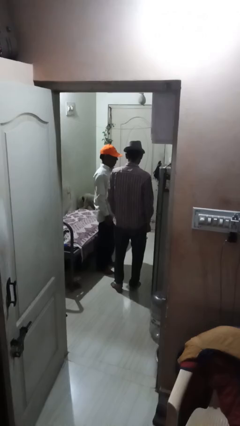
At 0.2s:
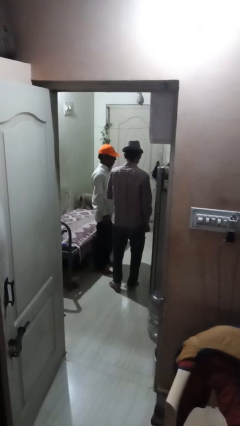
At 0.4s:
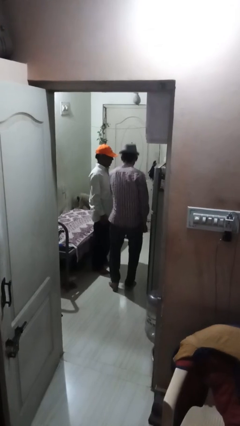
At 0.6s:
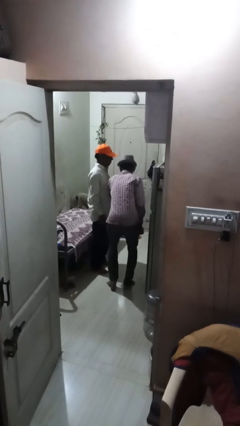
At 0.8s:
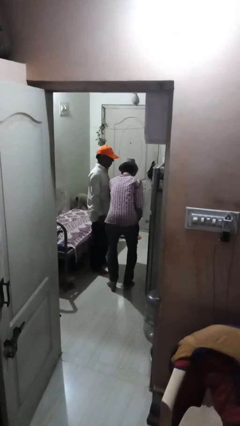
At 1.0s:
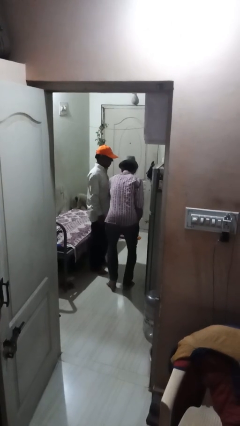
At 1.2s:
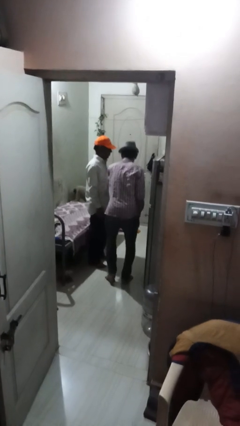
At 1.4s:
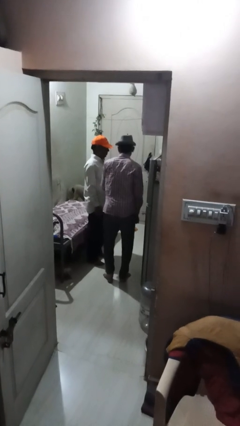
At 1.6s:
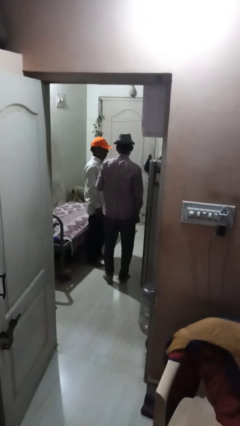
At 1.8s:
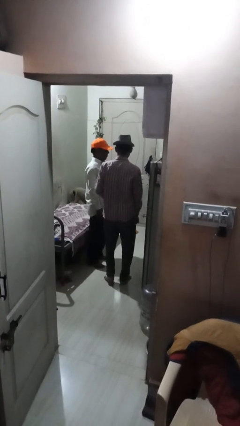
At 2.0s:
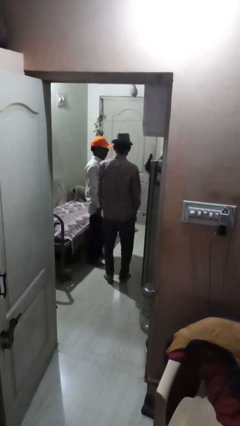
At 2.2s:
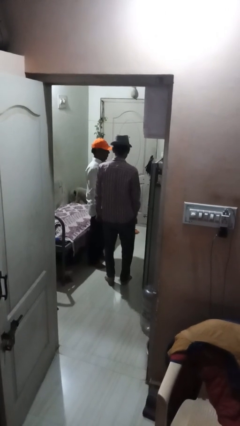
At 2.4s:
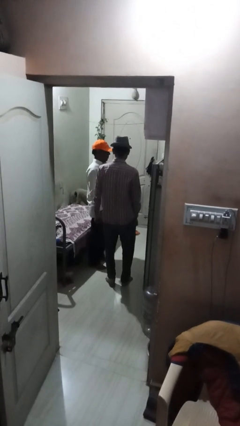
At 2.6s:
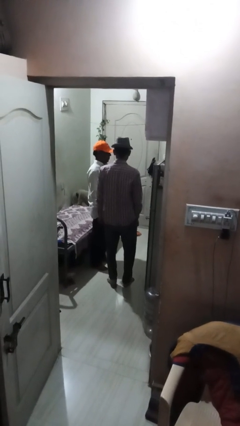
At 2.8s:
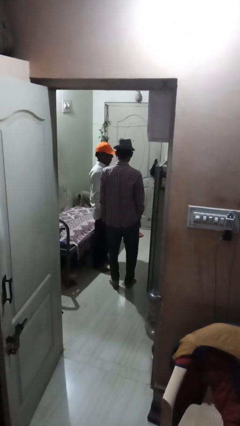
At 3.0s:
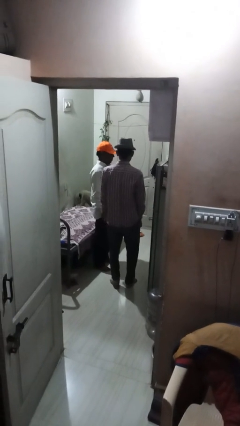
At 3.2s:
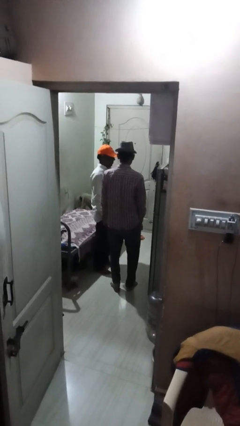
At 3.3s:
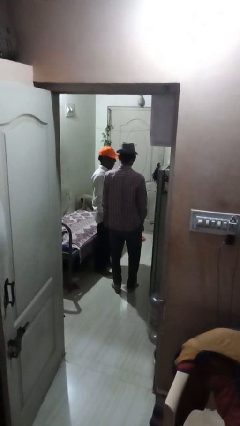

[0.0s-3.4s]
person nudges person with elbow

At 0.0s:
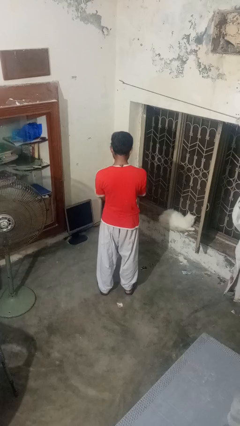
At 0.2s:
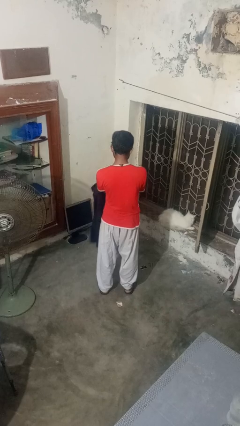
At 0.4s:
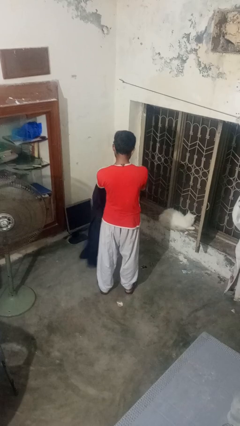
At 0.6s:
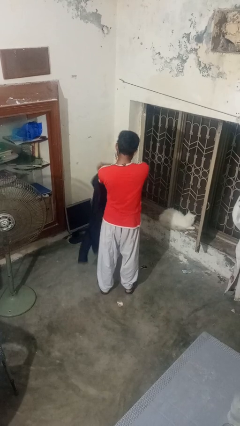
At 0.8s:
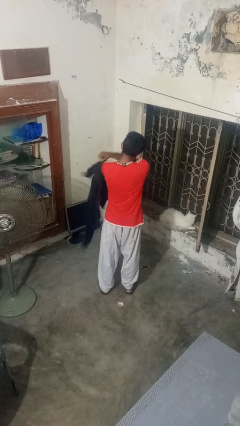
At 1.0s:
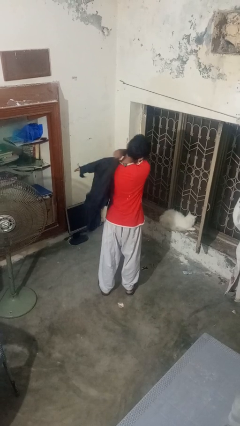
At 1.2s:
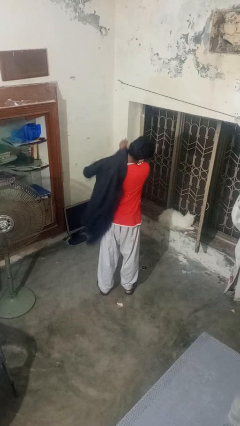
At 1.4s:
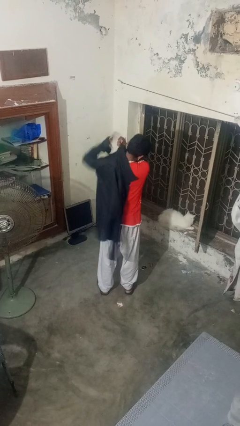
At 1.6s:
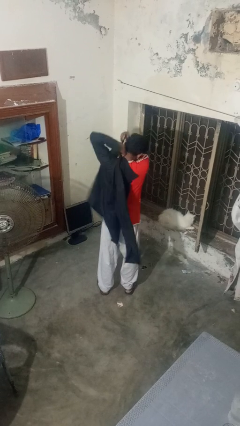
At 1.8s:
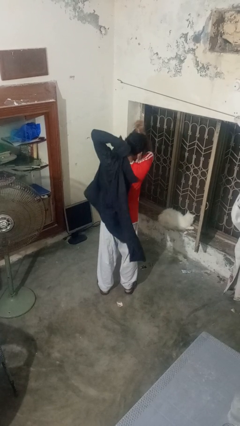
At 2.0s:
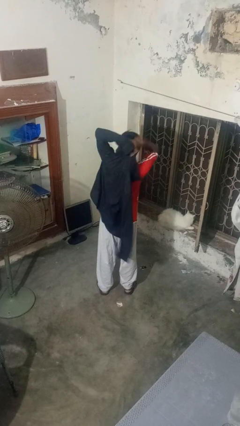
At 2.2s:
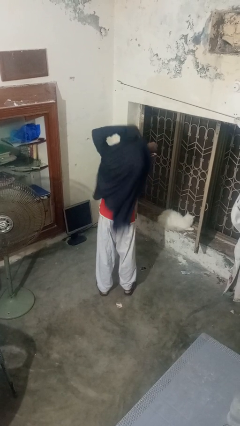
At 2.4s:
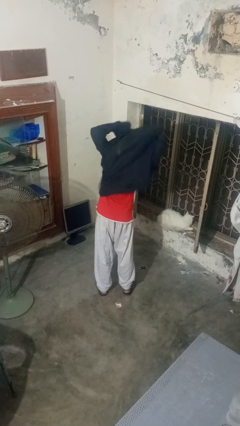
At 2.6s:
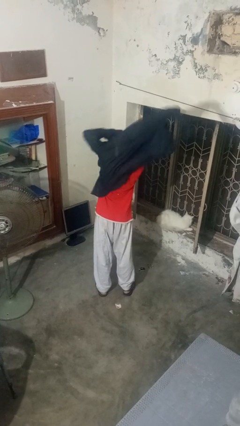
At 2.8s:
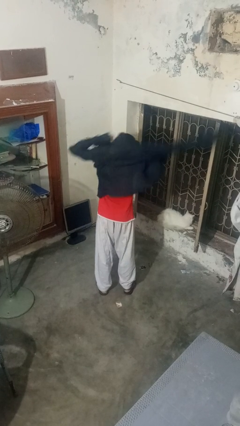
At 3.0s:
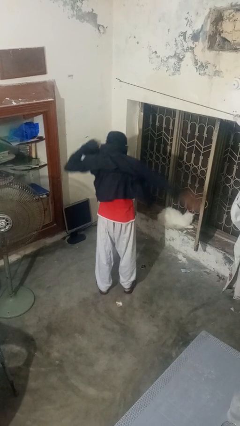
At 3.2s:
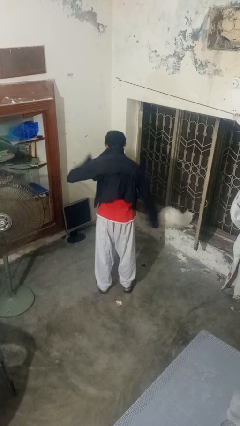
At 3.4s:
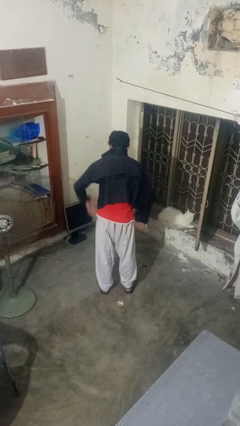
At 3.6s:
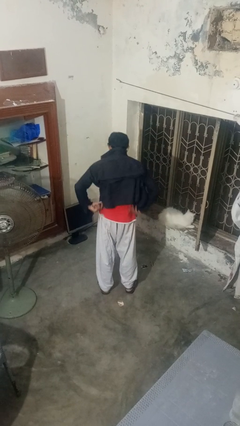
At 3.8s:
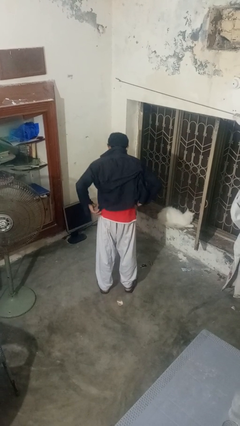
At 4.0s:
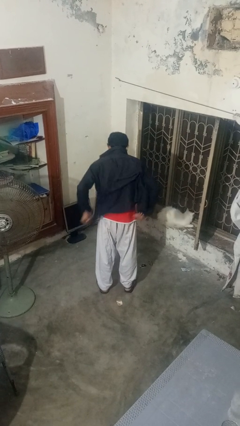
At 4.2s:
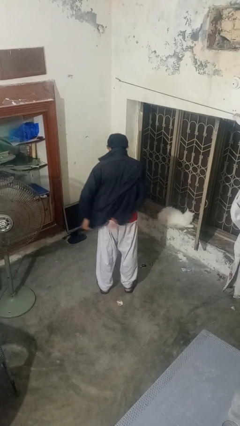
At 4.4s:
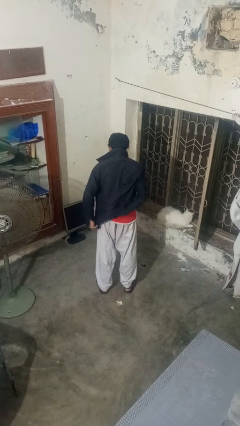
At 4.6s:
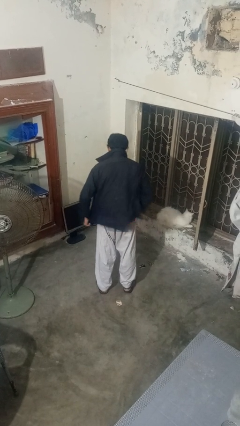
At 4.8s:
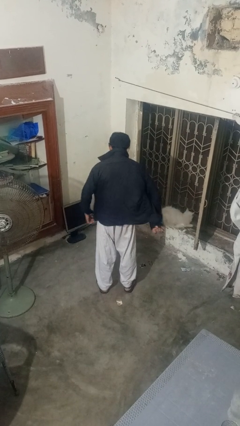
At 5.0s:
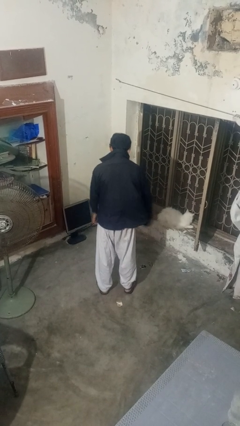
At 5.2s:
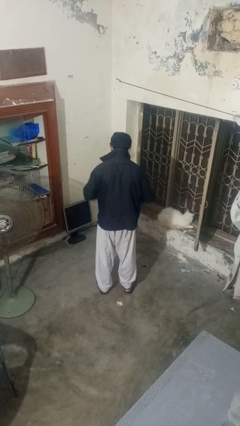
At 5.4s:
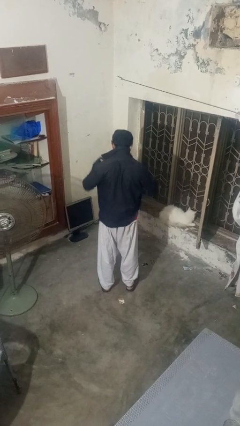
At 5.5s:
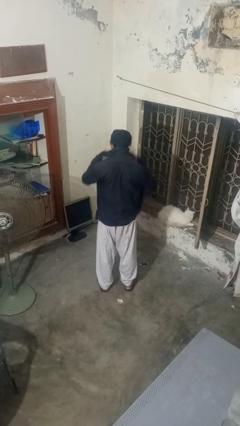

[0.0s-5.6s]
person puts on shirt

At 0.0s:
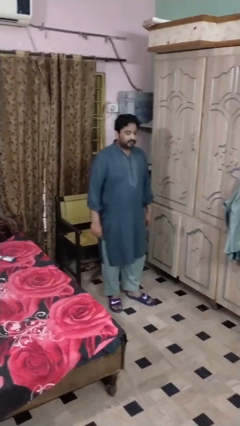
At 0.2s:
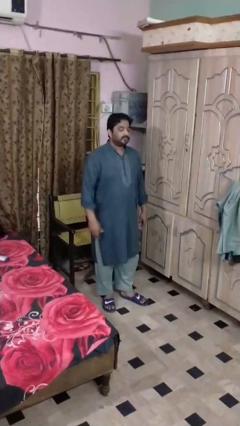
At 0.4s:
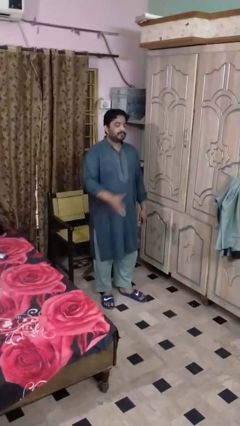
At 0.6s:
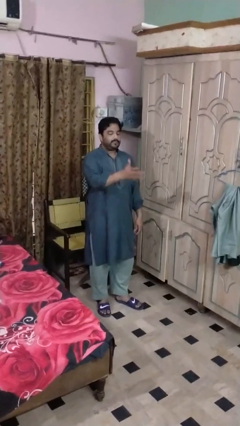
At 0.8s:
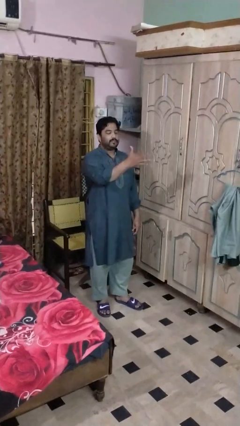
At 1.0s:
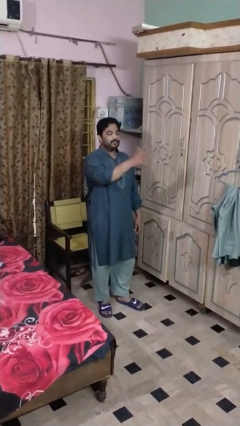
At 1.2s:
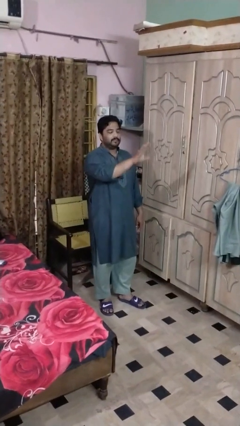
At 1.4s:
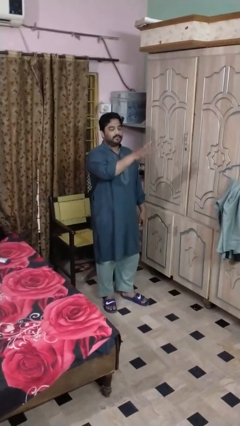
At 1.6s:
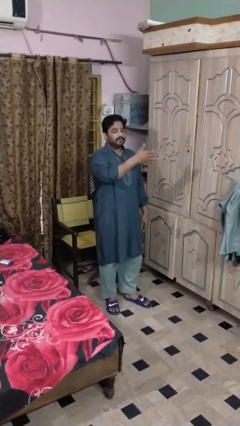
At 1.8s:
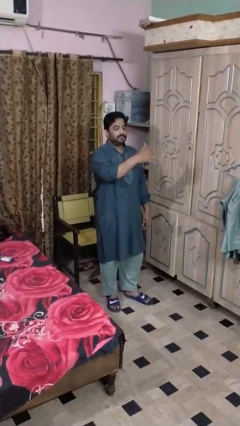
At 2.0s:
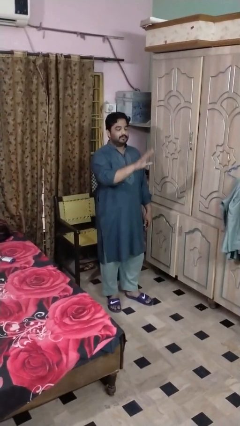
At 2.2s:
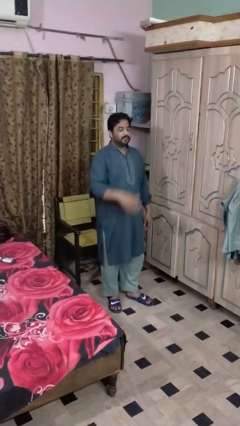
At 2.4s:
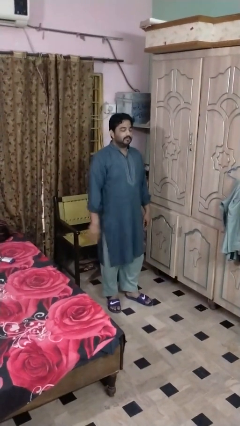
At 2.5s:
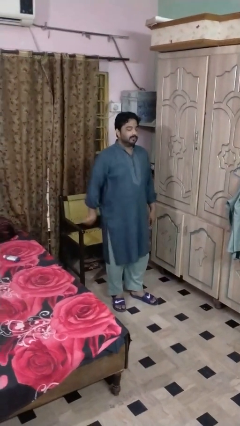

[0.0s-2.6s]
person shakes head

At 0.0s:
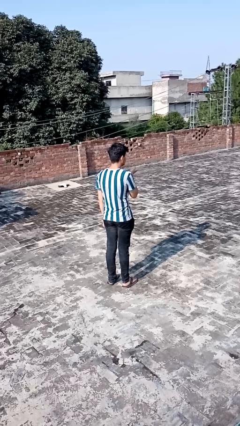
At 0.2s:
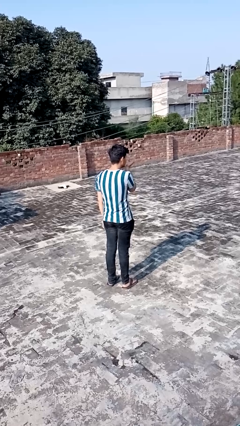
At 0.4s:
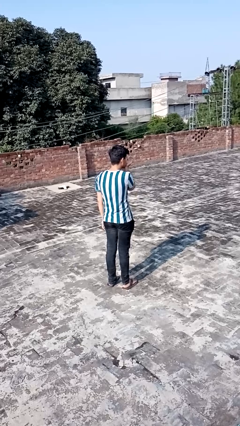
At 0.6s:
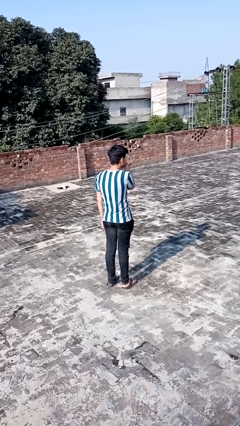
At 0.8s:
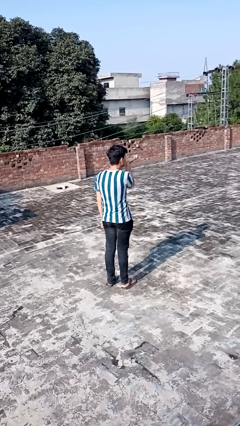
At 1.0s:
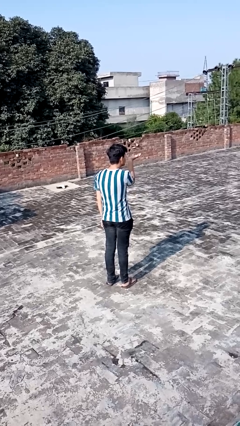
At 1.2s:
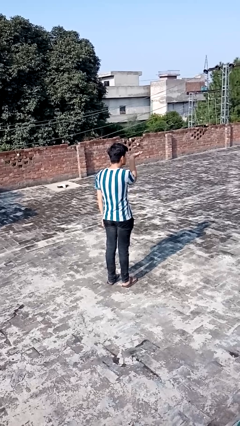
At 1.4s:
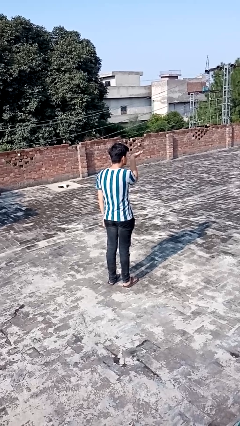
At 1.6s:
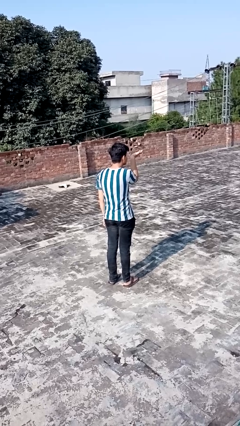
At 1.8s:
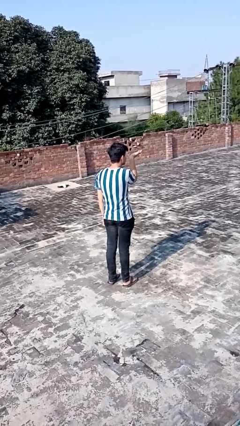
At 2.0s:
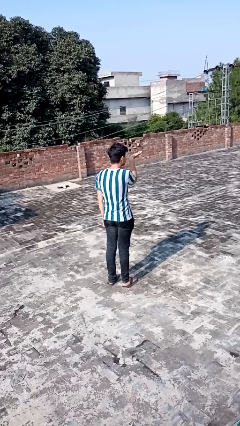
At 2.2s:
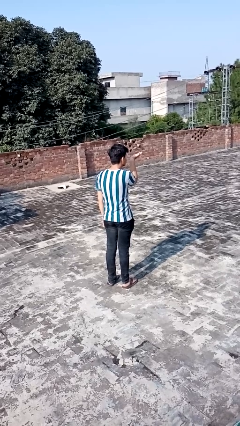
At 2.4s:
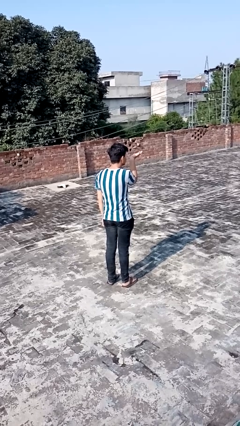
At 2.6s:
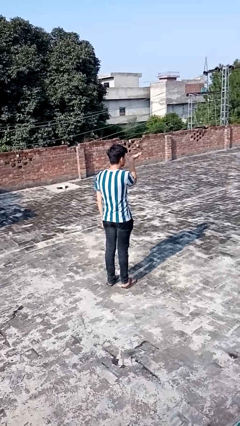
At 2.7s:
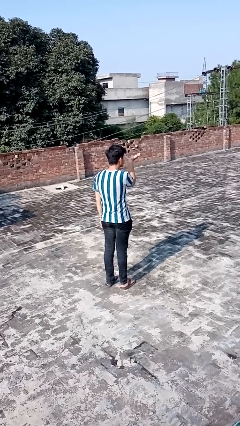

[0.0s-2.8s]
person gestures blow kiss

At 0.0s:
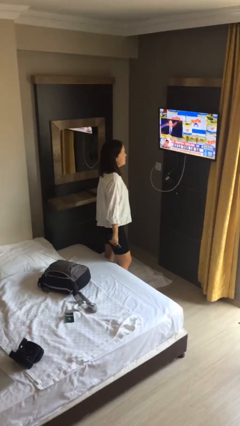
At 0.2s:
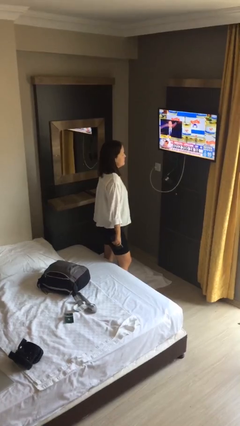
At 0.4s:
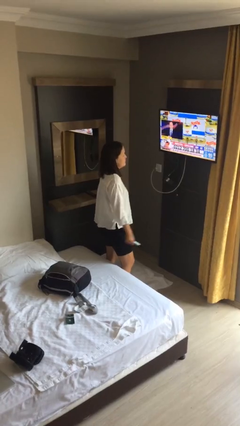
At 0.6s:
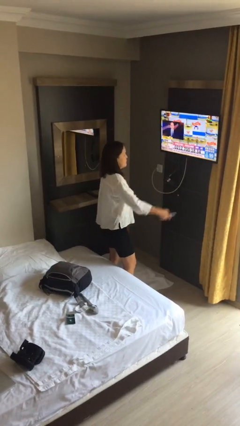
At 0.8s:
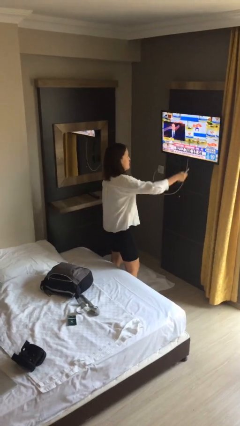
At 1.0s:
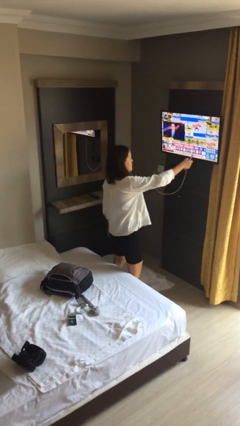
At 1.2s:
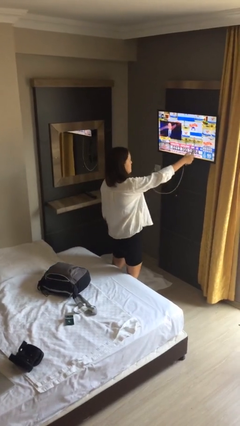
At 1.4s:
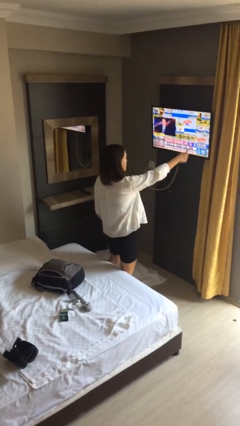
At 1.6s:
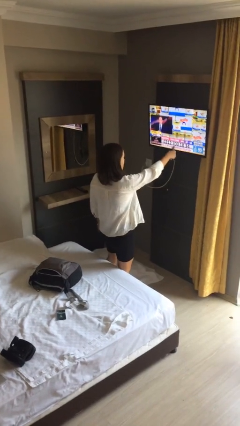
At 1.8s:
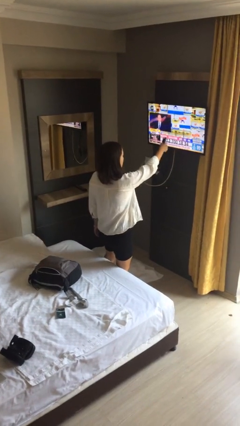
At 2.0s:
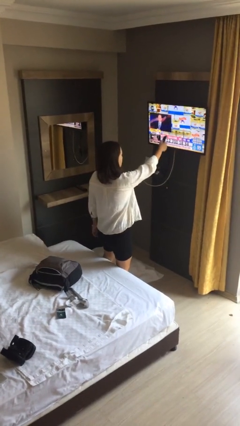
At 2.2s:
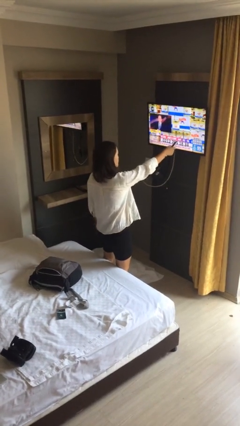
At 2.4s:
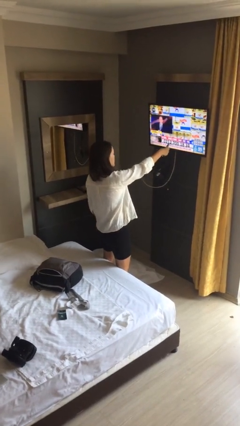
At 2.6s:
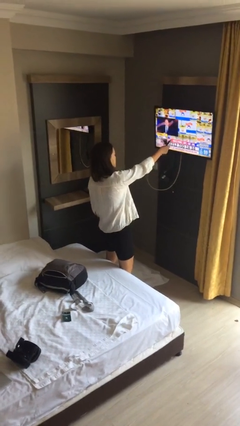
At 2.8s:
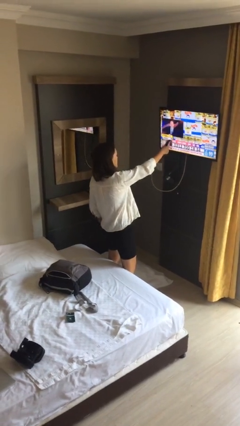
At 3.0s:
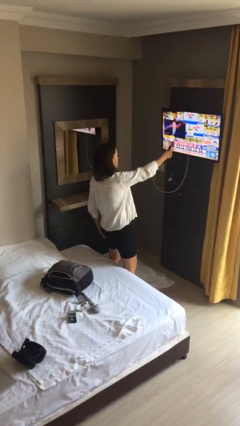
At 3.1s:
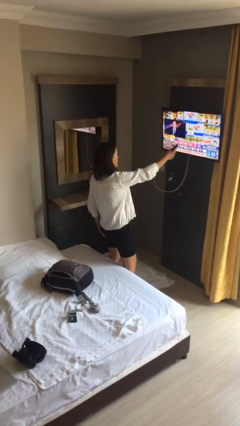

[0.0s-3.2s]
person uses television remote
